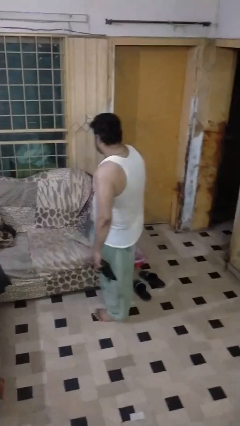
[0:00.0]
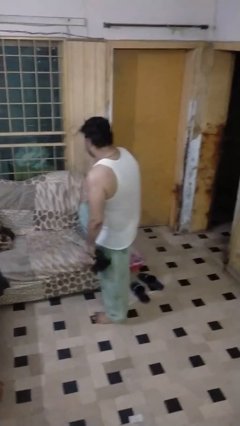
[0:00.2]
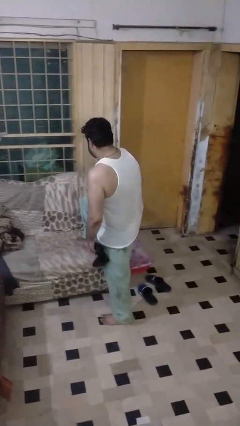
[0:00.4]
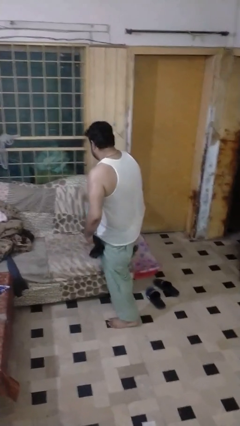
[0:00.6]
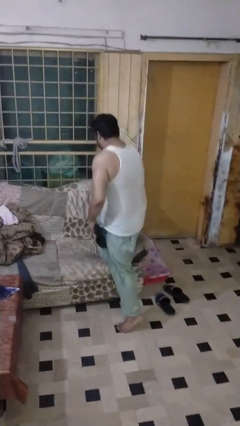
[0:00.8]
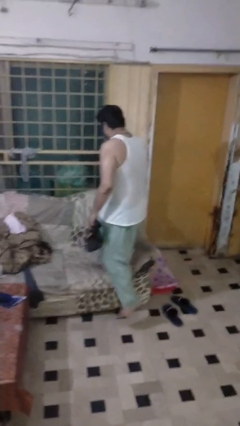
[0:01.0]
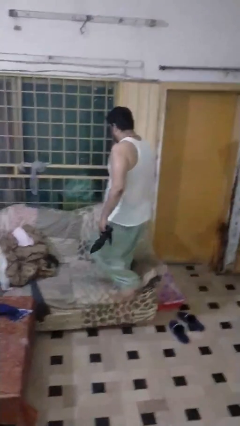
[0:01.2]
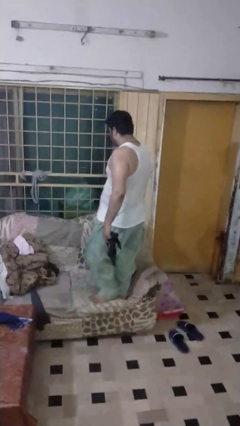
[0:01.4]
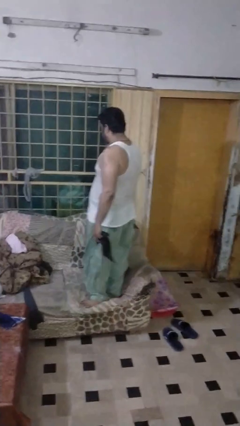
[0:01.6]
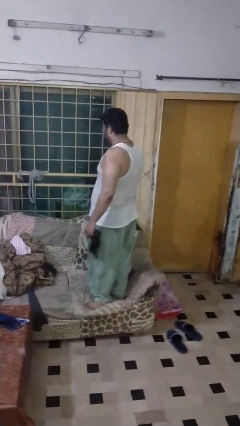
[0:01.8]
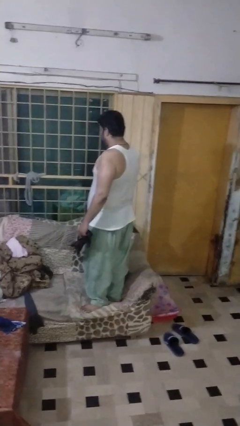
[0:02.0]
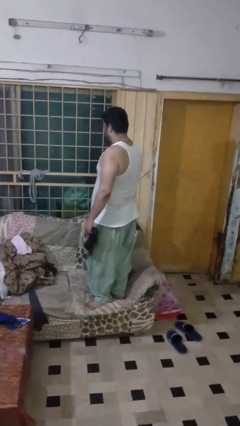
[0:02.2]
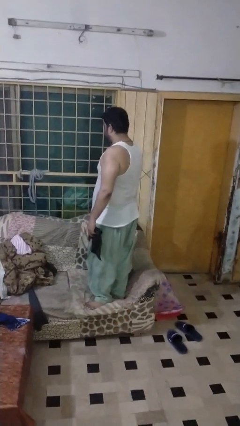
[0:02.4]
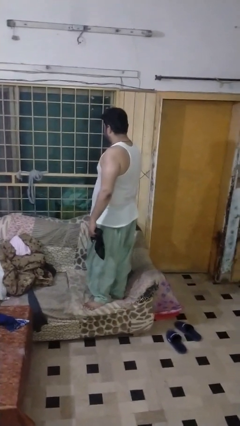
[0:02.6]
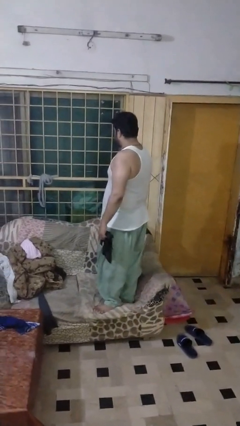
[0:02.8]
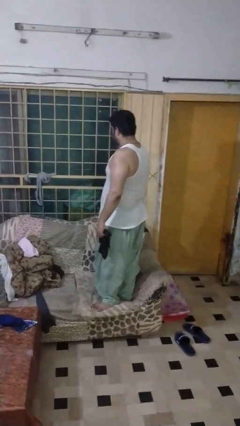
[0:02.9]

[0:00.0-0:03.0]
person climbs on couch

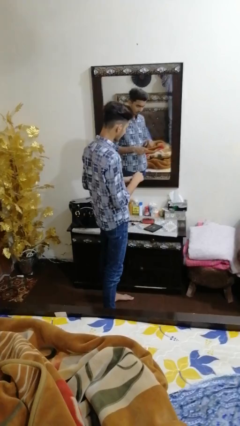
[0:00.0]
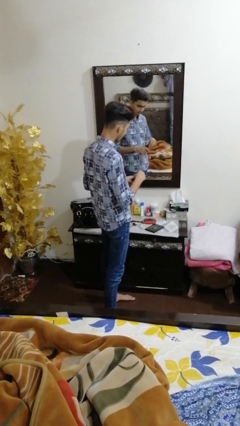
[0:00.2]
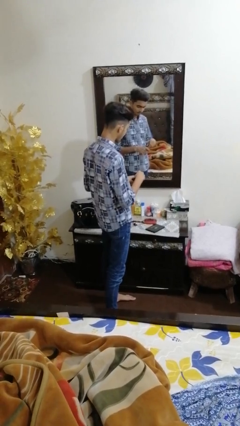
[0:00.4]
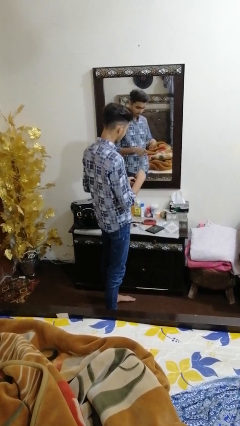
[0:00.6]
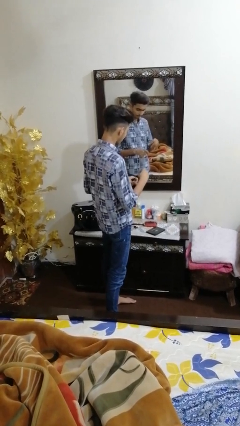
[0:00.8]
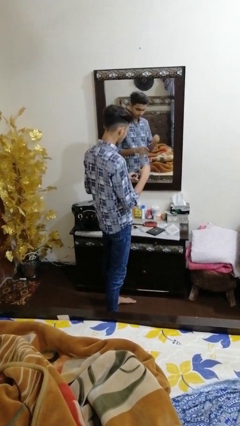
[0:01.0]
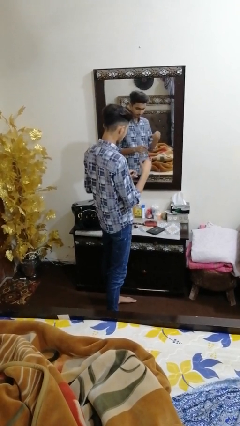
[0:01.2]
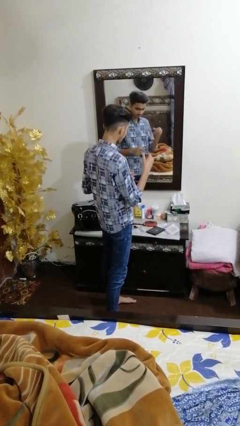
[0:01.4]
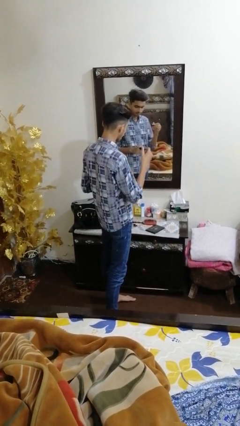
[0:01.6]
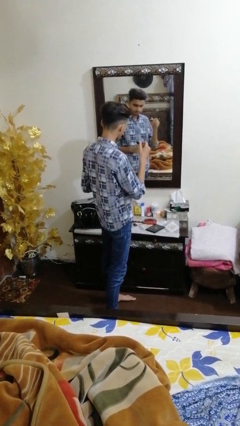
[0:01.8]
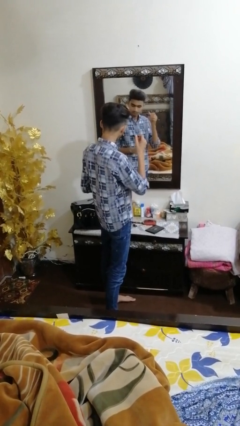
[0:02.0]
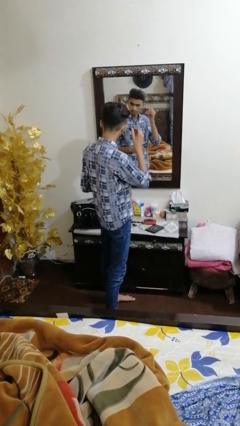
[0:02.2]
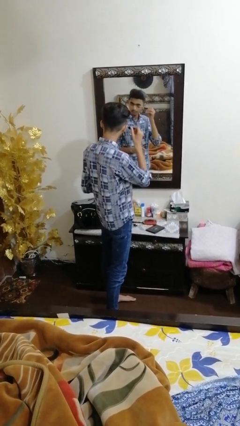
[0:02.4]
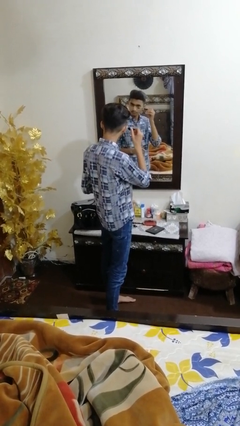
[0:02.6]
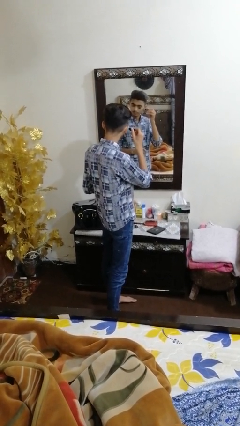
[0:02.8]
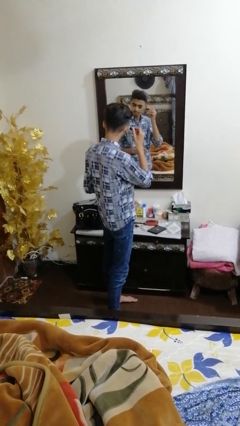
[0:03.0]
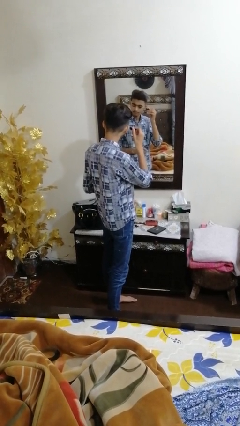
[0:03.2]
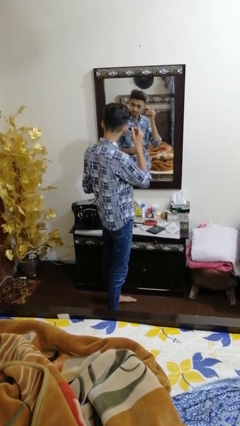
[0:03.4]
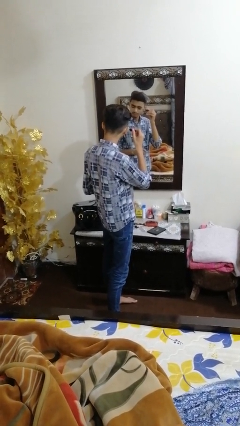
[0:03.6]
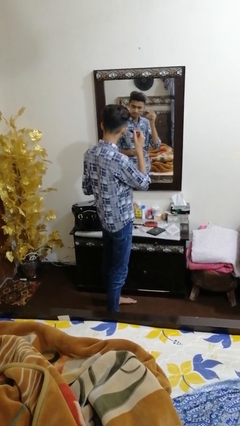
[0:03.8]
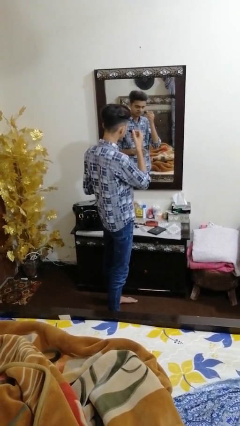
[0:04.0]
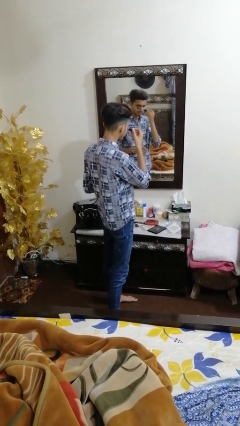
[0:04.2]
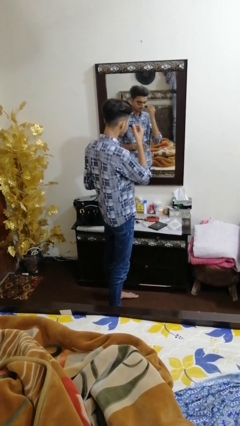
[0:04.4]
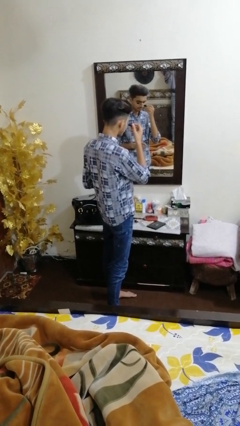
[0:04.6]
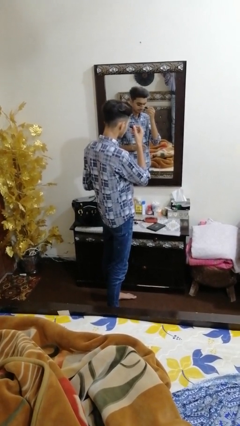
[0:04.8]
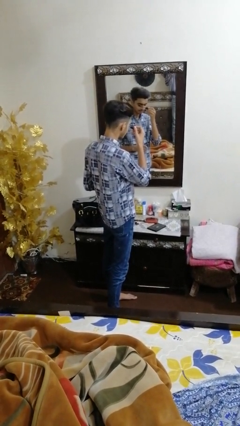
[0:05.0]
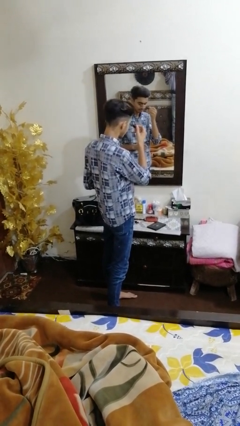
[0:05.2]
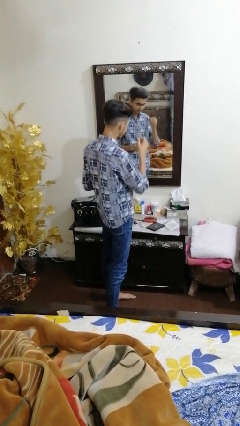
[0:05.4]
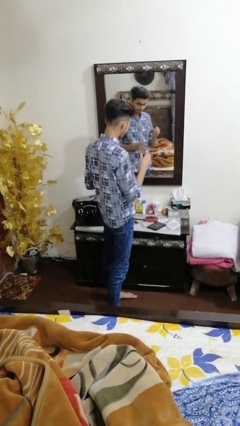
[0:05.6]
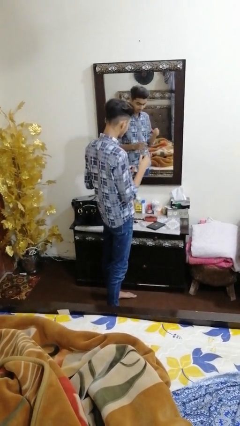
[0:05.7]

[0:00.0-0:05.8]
person applies eye makeup

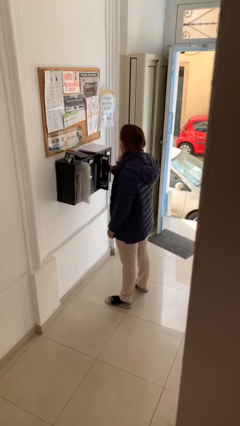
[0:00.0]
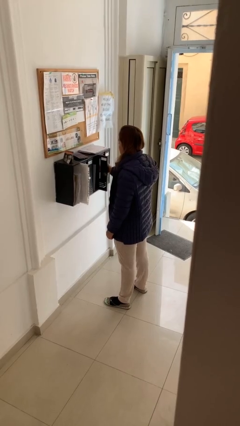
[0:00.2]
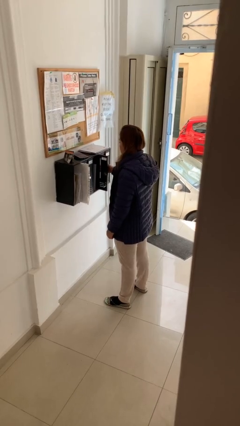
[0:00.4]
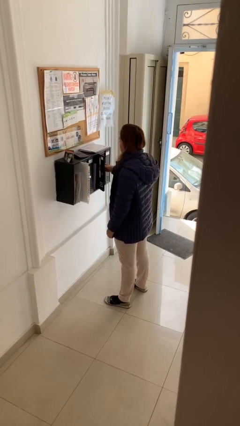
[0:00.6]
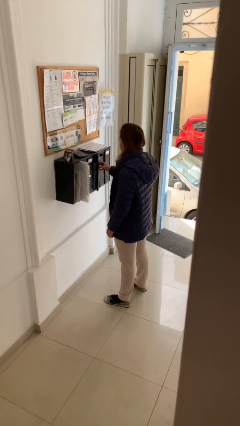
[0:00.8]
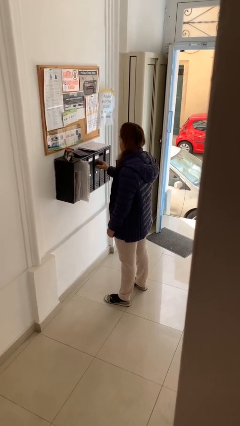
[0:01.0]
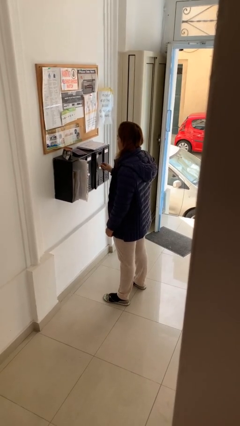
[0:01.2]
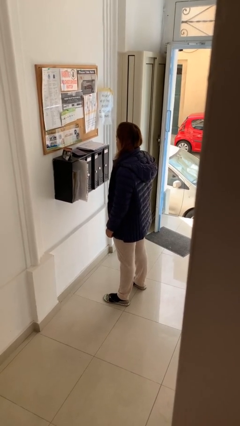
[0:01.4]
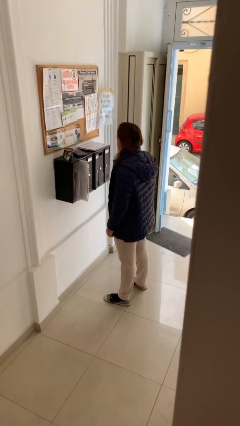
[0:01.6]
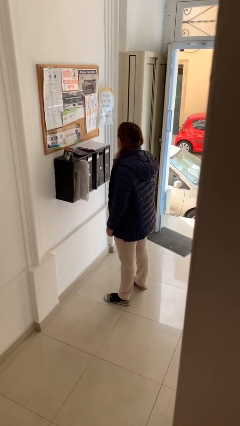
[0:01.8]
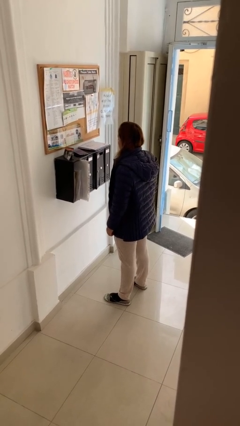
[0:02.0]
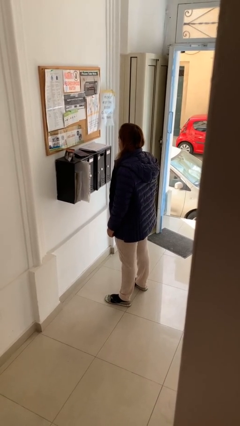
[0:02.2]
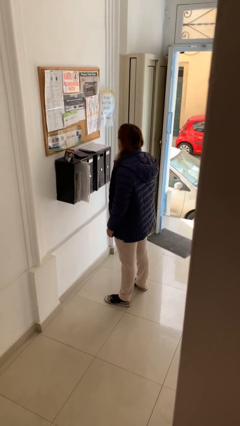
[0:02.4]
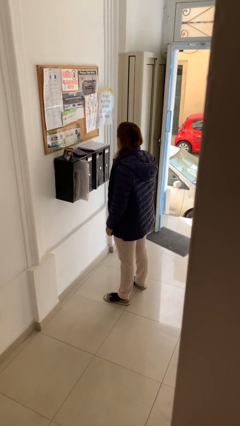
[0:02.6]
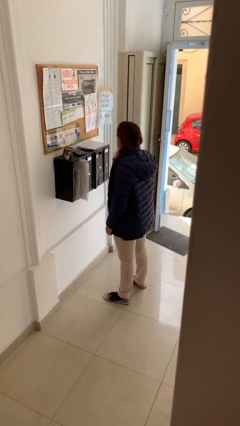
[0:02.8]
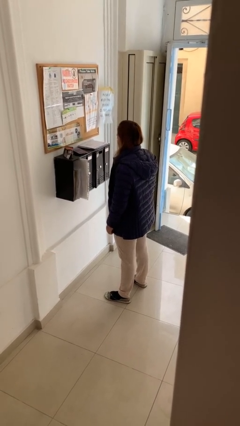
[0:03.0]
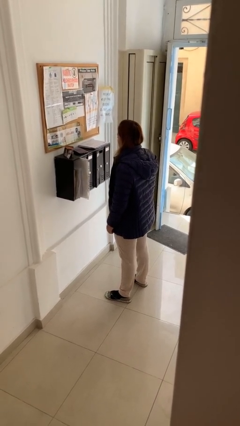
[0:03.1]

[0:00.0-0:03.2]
person closes mailbox

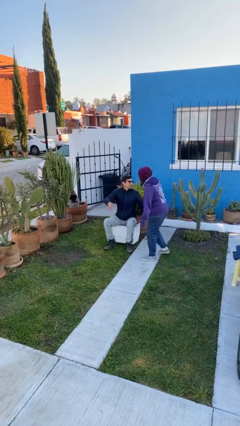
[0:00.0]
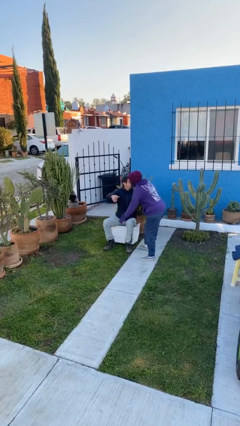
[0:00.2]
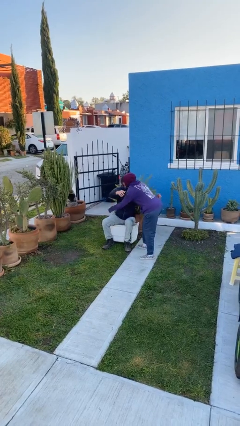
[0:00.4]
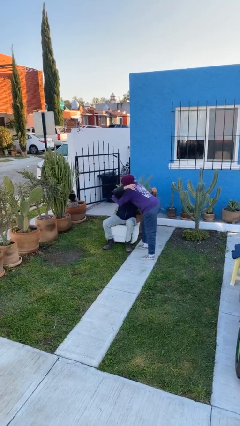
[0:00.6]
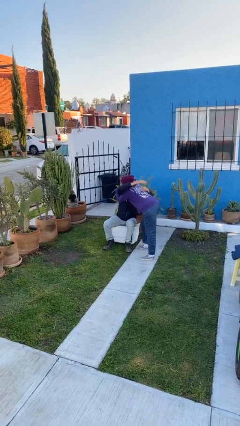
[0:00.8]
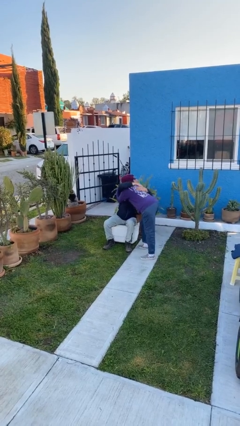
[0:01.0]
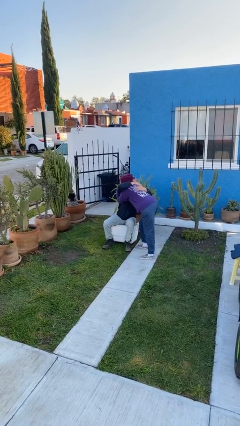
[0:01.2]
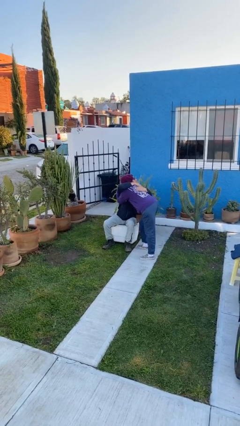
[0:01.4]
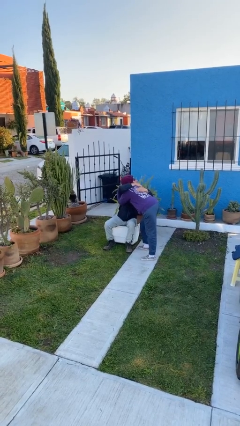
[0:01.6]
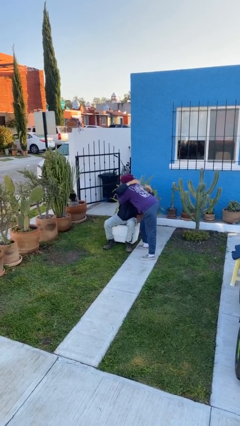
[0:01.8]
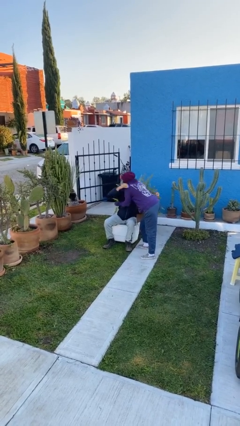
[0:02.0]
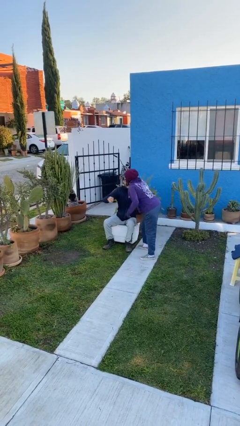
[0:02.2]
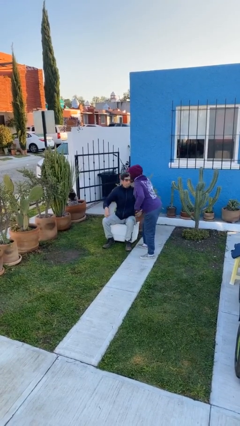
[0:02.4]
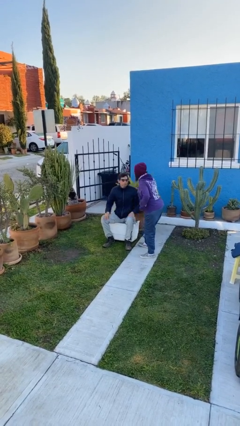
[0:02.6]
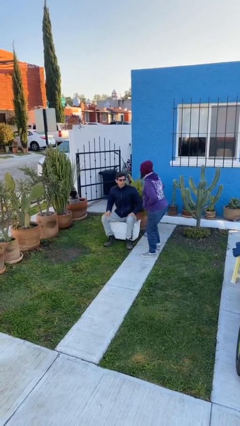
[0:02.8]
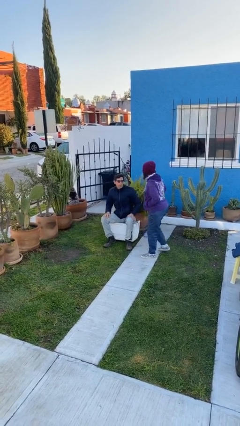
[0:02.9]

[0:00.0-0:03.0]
person embraces person

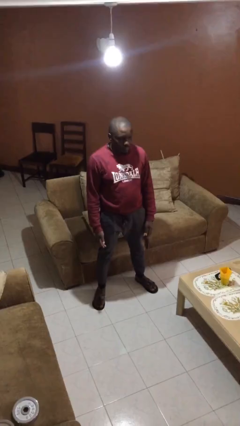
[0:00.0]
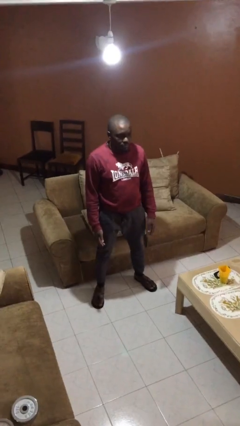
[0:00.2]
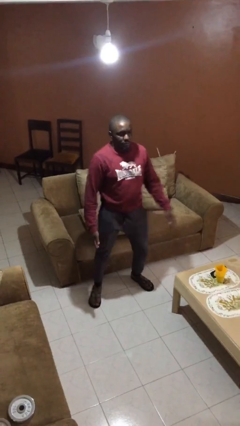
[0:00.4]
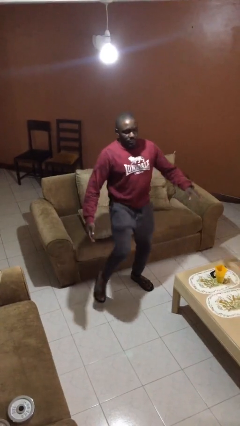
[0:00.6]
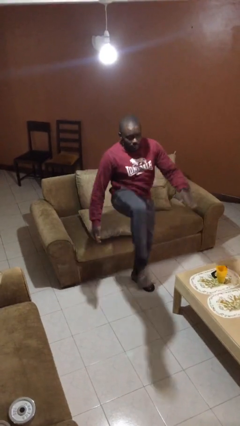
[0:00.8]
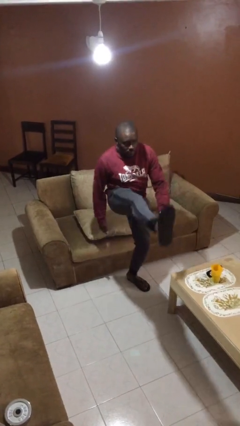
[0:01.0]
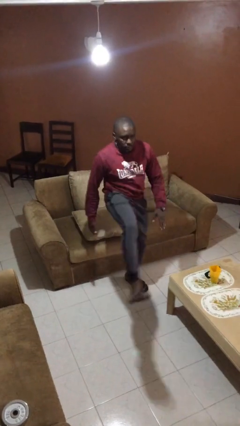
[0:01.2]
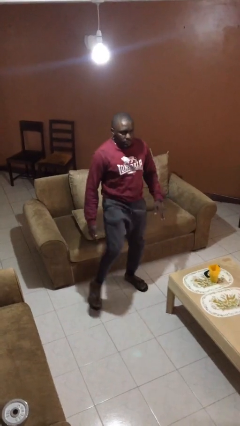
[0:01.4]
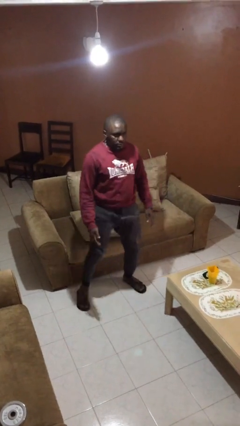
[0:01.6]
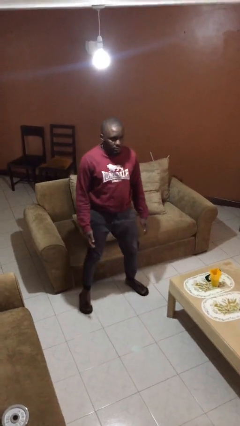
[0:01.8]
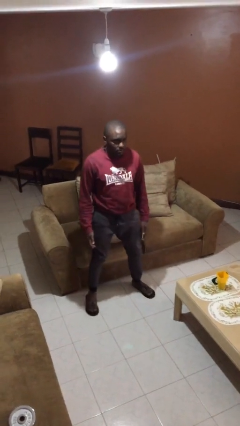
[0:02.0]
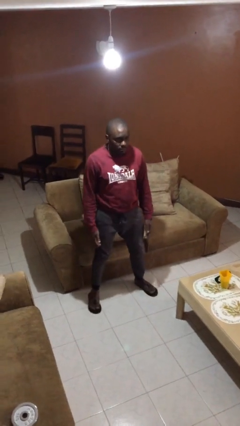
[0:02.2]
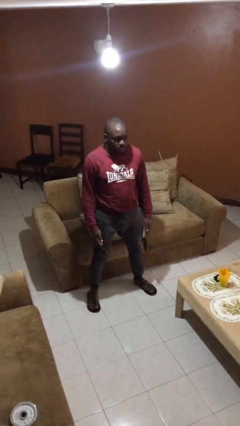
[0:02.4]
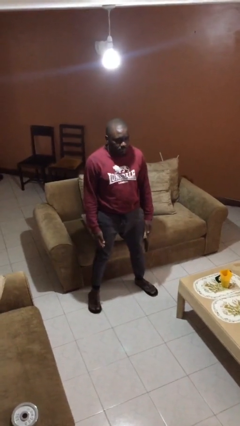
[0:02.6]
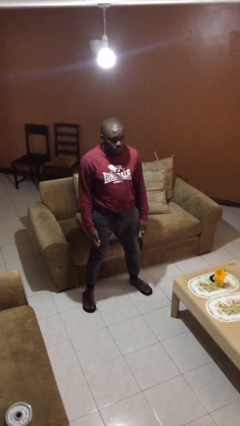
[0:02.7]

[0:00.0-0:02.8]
person karate kicks
